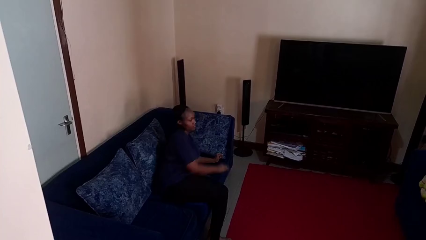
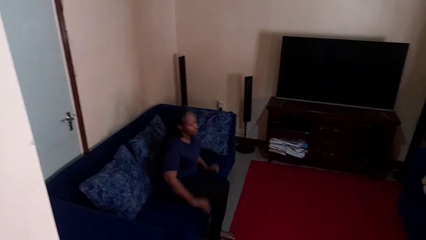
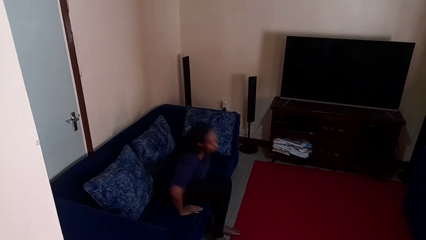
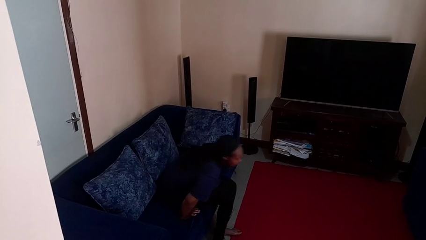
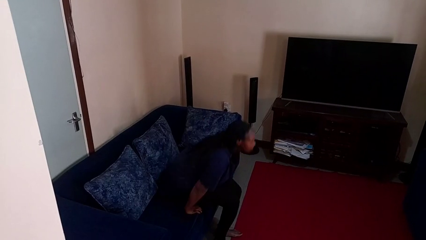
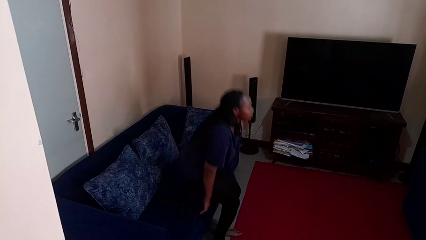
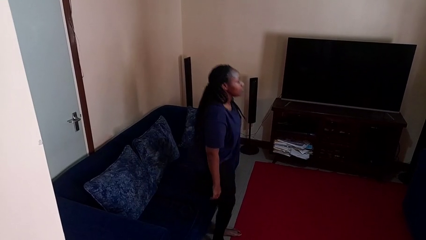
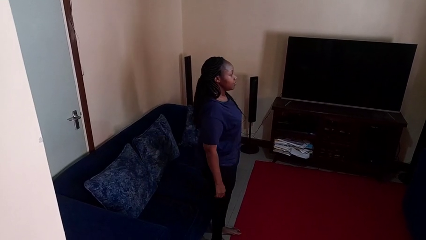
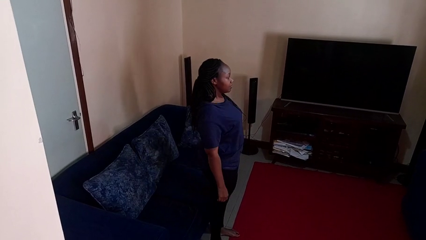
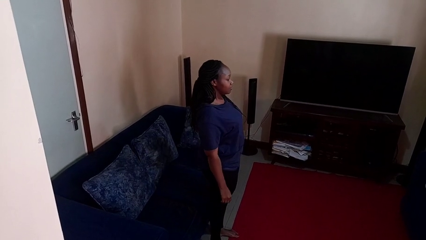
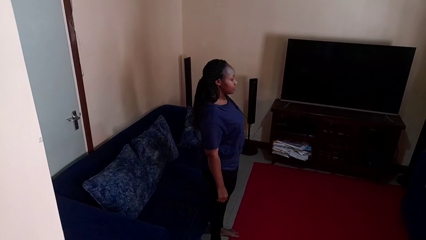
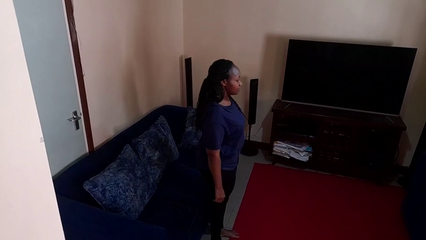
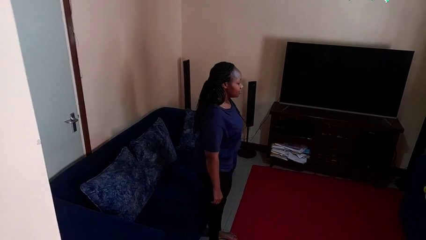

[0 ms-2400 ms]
person stands up

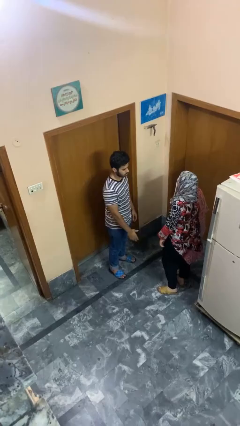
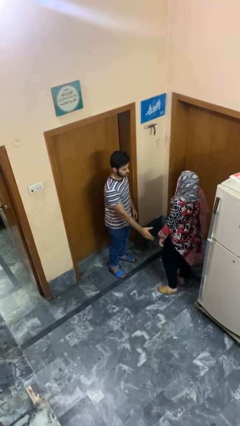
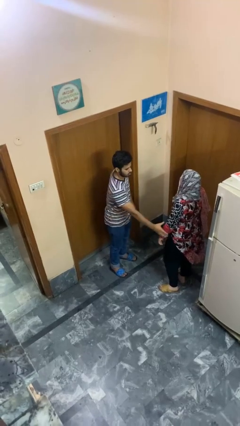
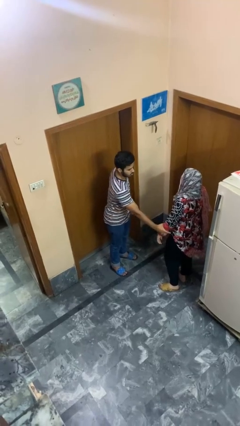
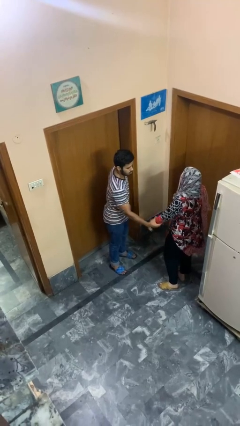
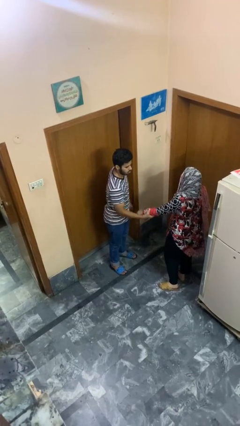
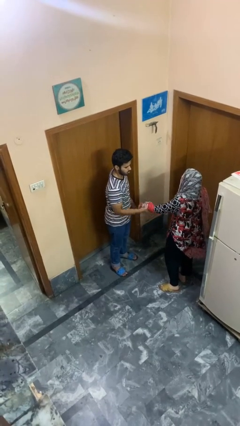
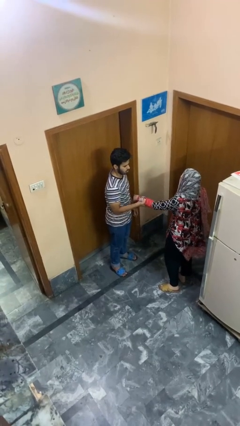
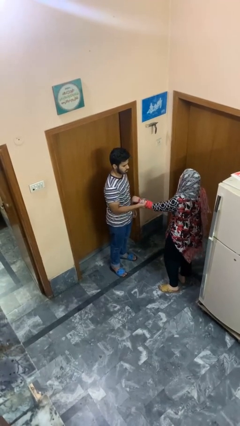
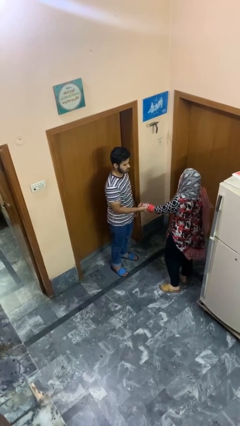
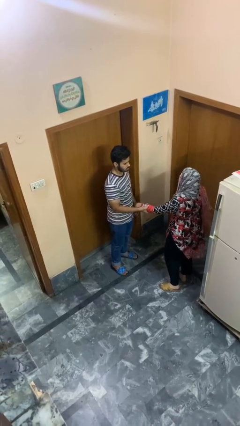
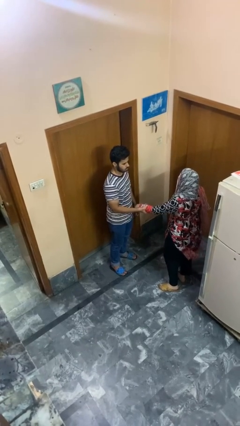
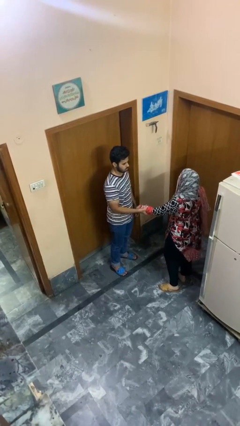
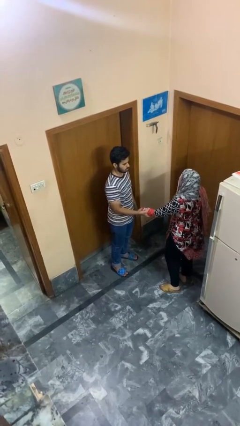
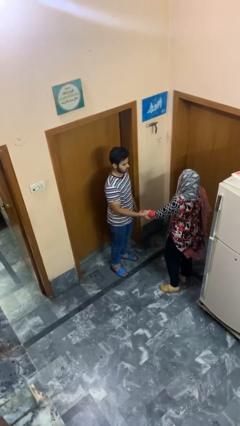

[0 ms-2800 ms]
person grabs person by forearm

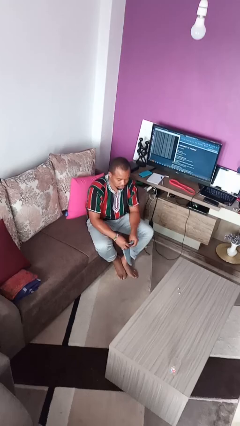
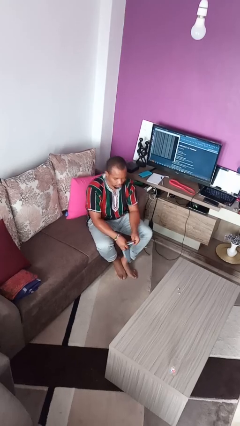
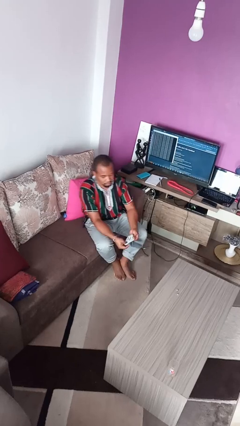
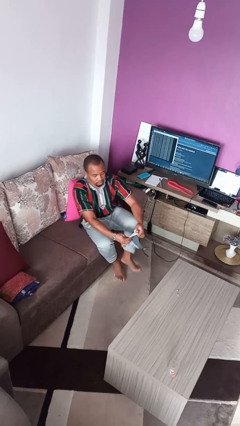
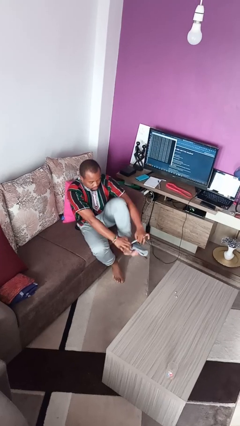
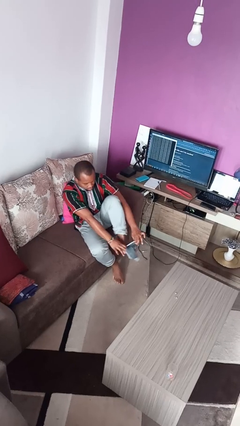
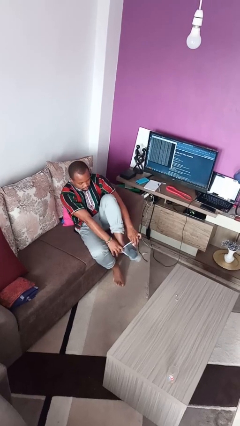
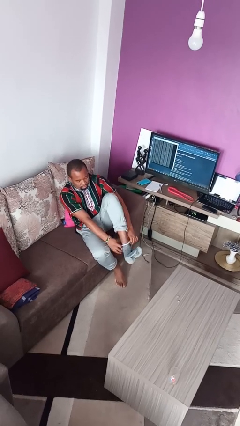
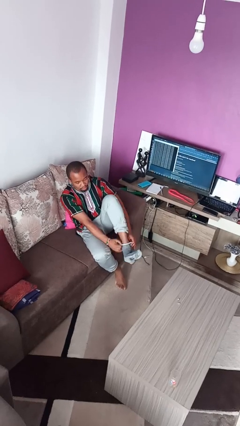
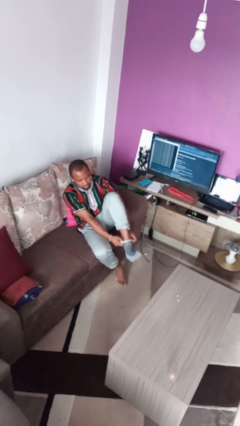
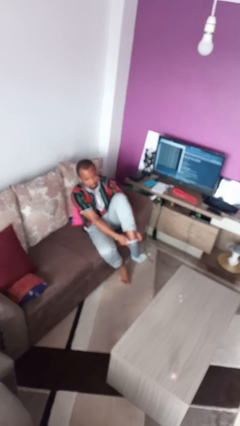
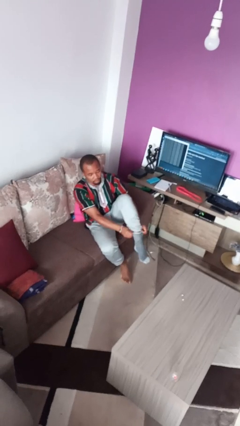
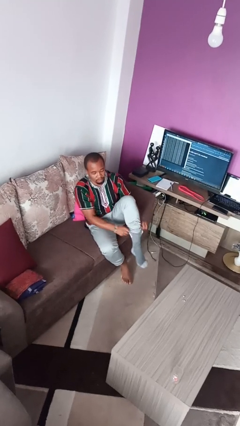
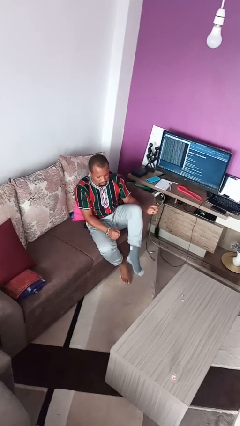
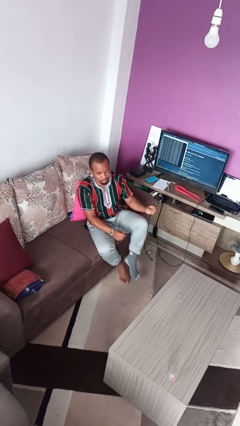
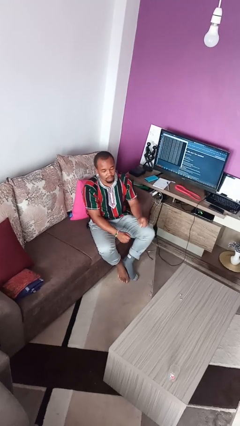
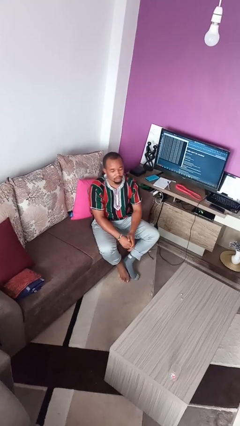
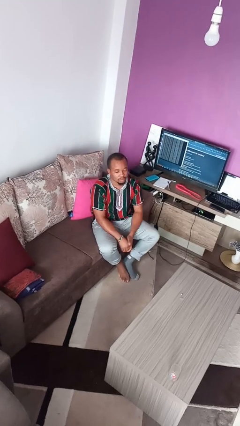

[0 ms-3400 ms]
person puts on socks

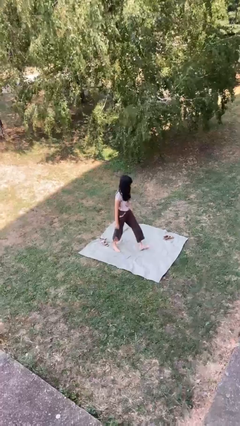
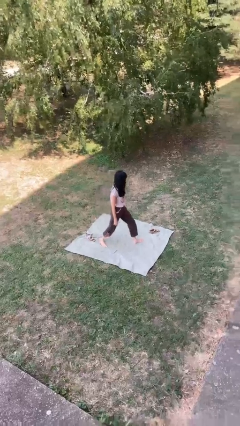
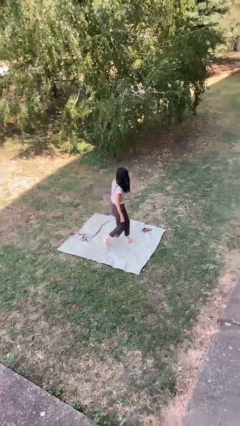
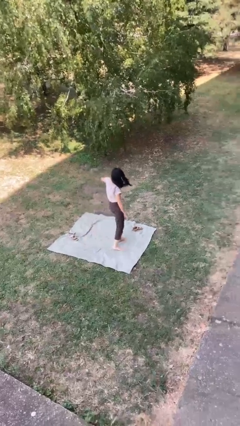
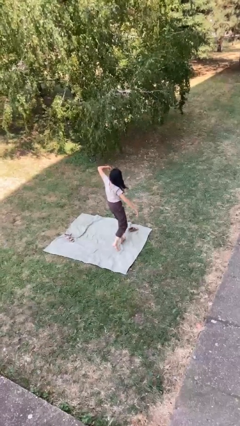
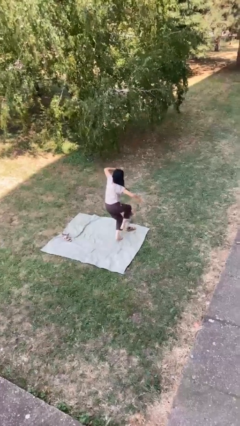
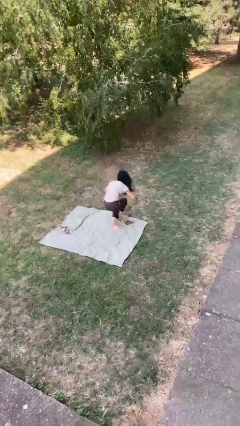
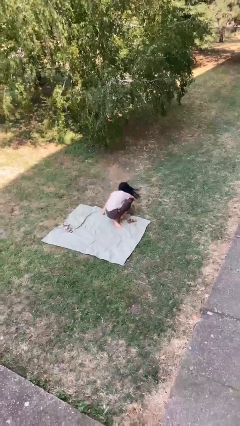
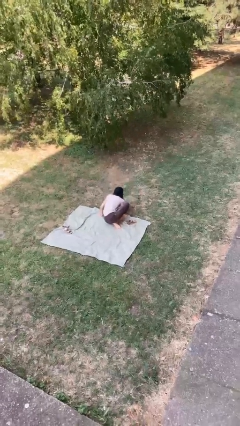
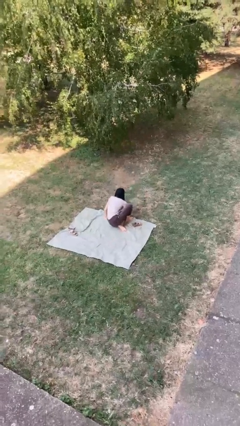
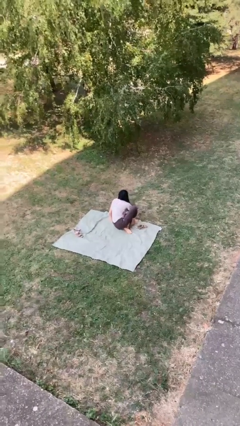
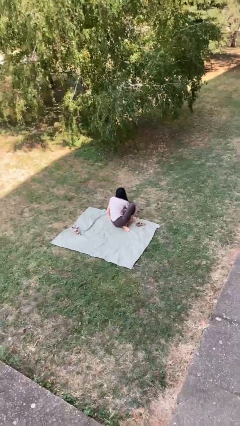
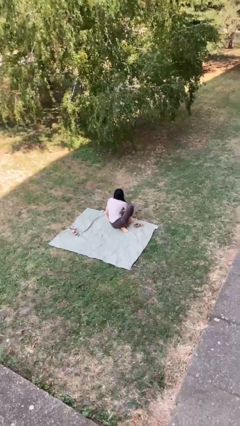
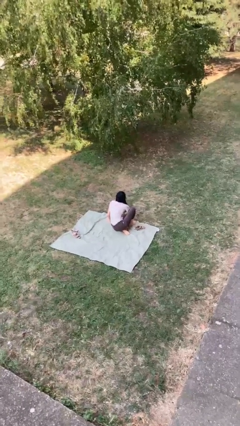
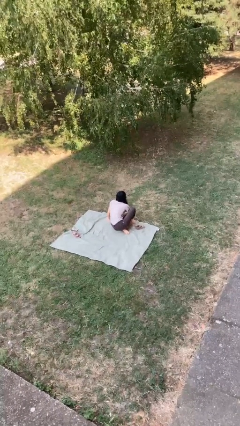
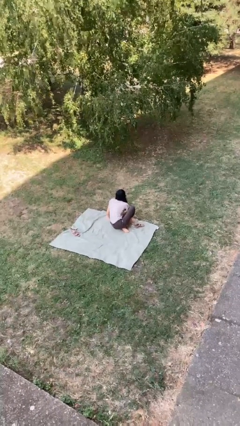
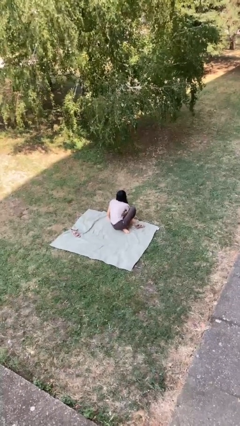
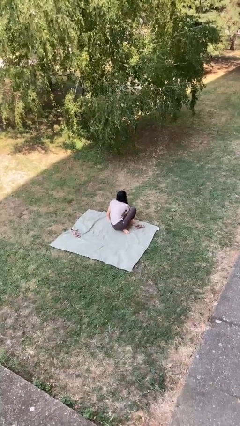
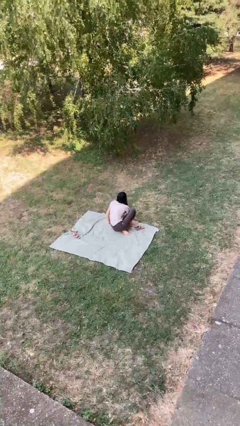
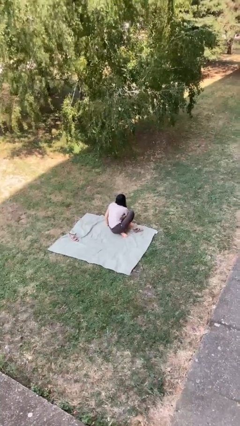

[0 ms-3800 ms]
person trips on object on floor

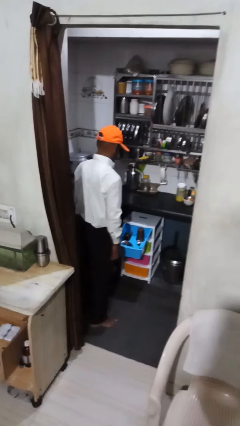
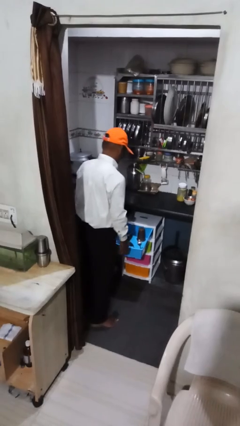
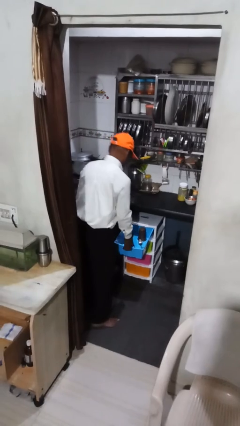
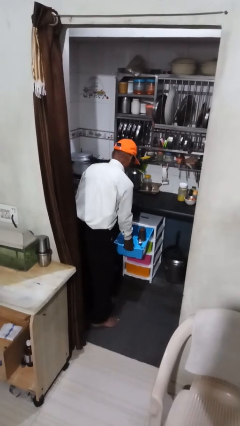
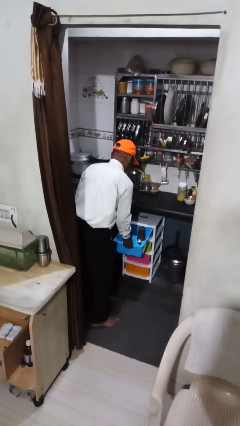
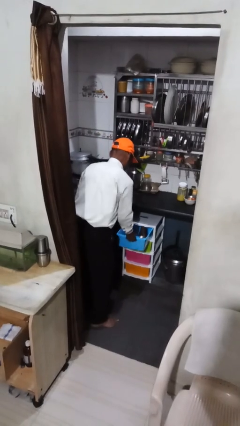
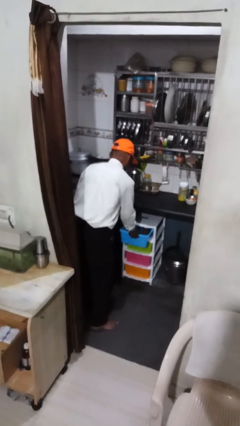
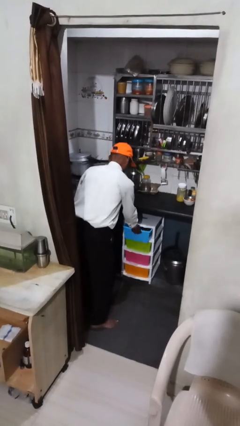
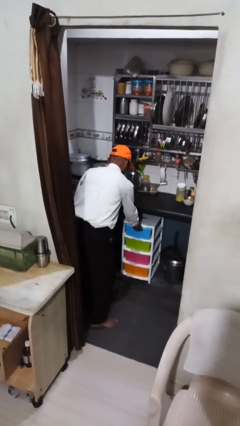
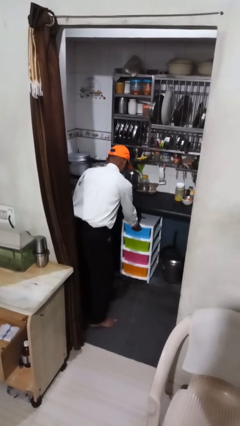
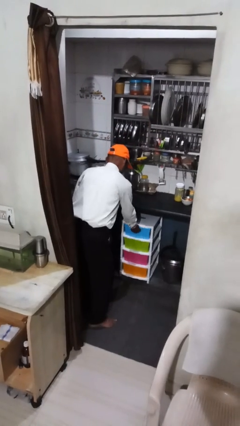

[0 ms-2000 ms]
person closes kitchen drawer

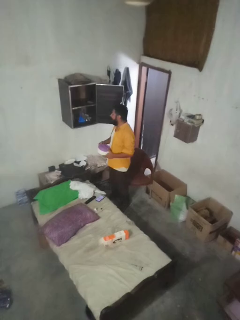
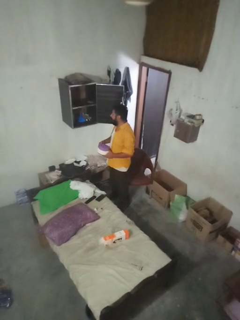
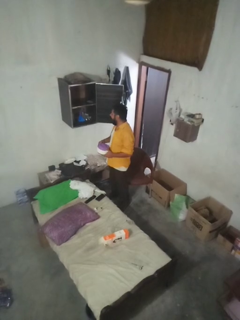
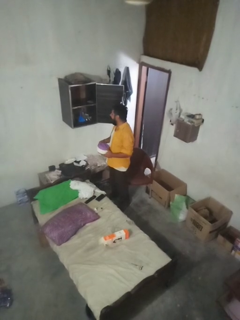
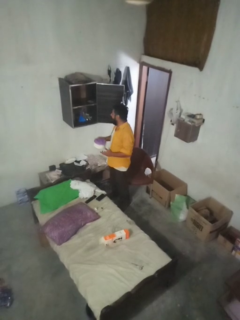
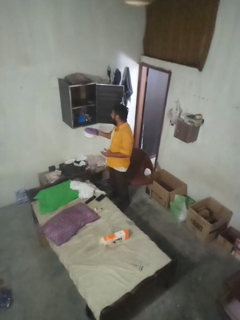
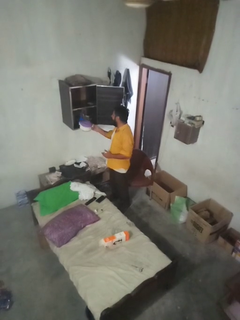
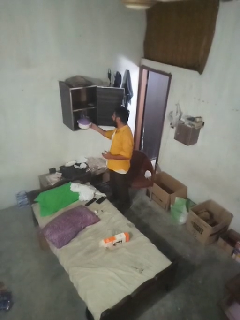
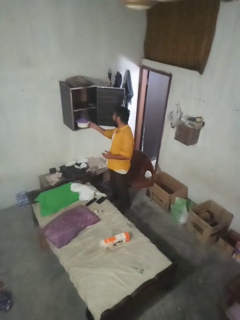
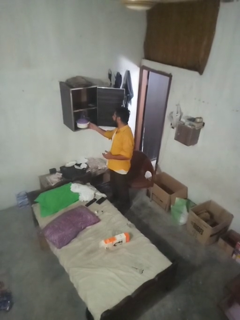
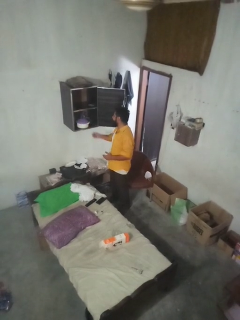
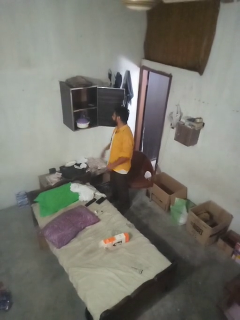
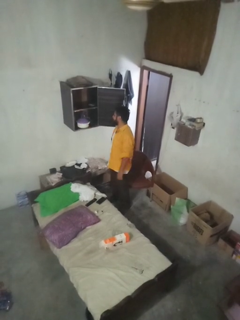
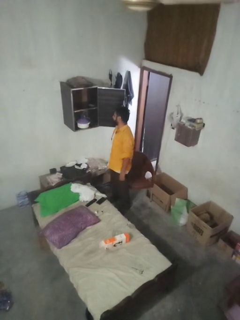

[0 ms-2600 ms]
person loads groceries into refrigerator

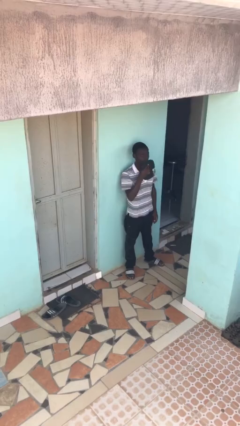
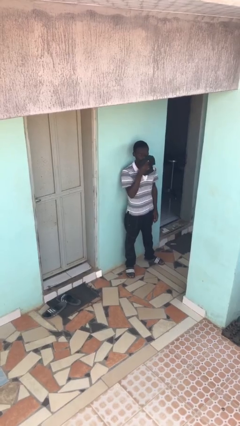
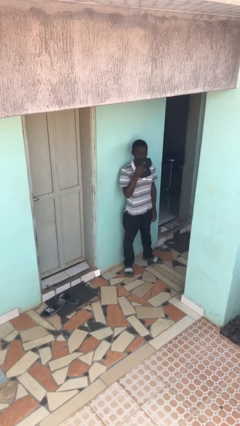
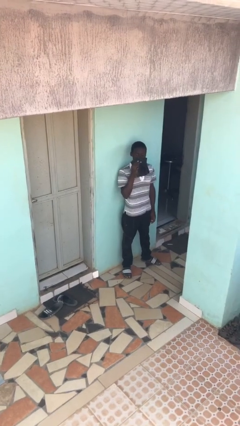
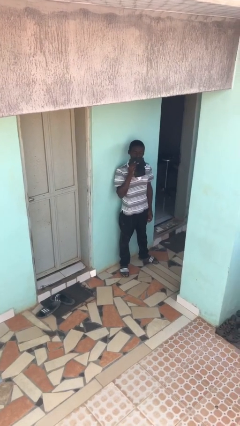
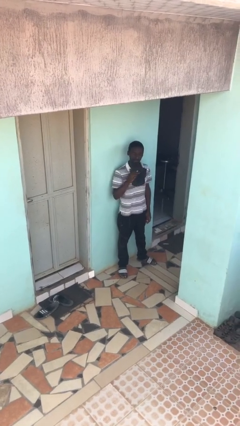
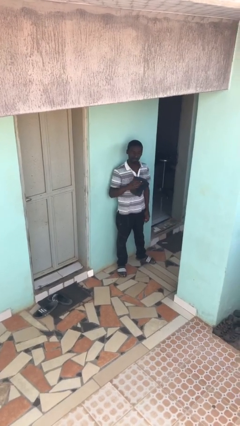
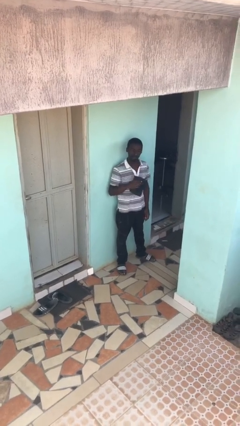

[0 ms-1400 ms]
person wipes mouth with napkin
